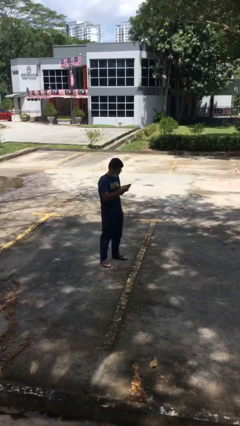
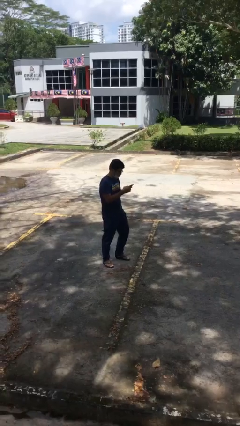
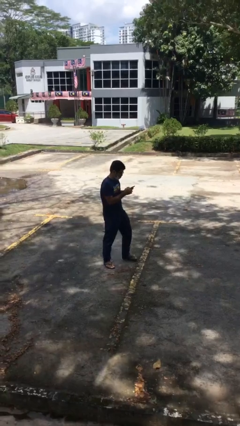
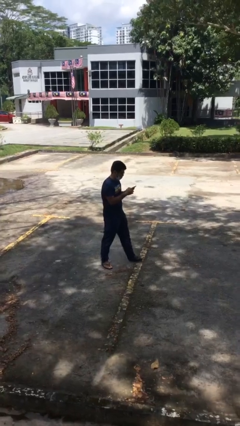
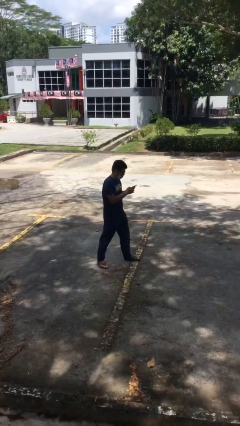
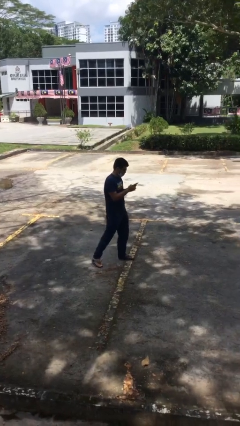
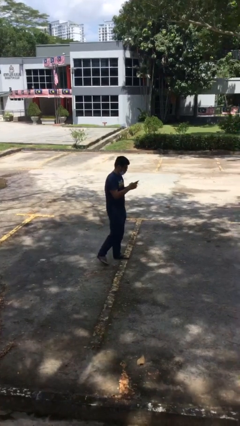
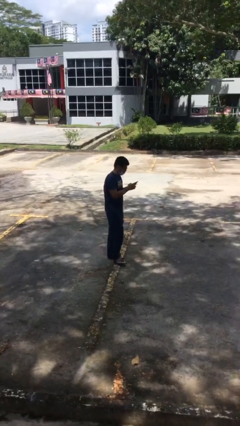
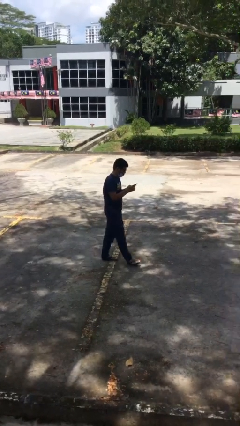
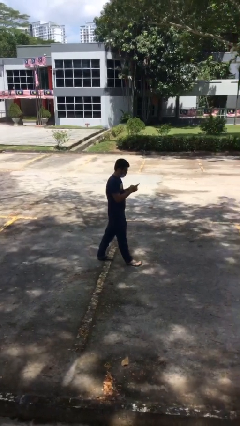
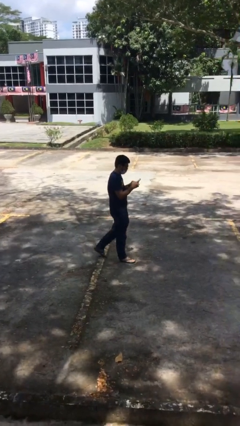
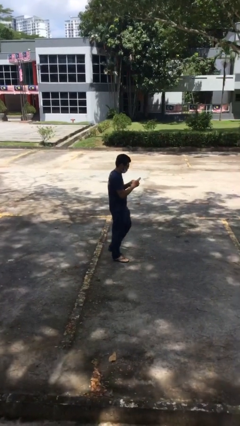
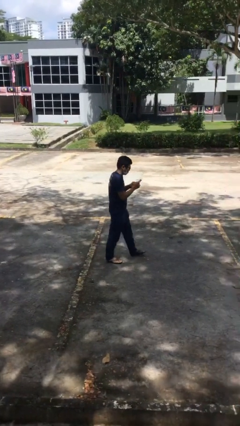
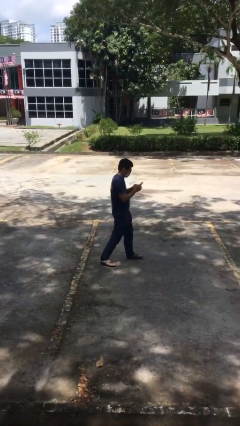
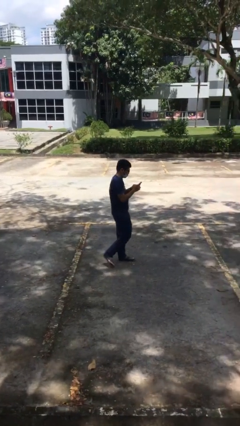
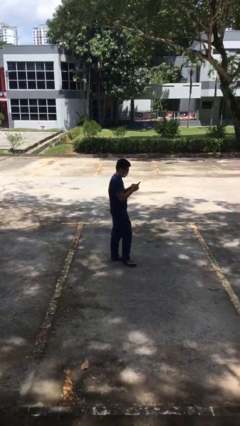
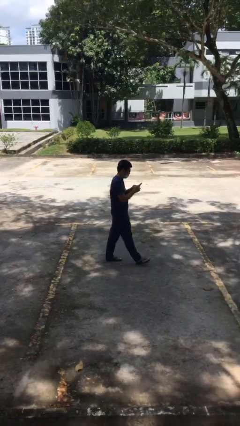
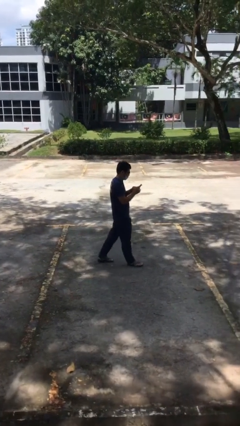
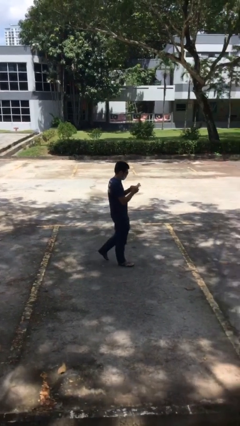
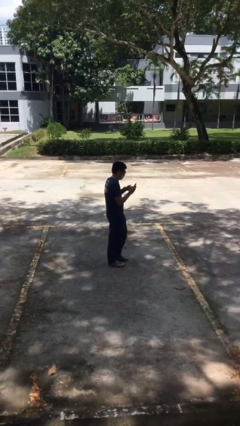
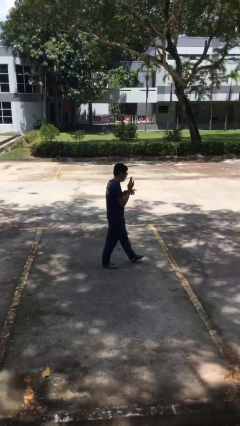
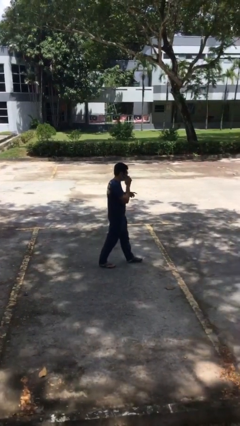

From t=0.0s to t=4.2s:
person texts on phone

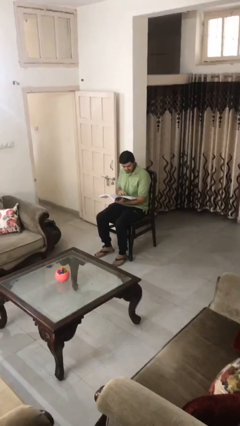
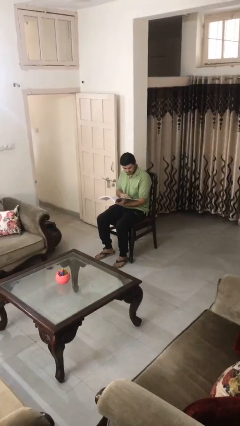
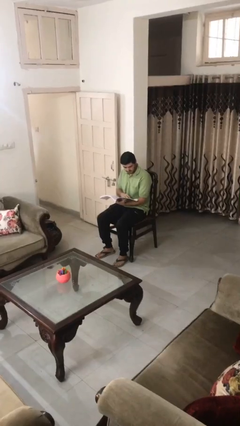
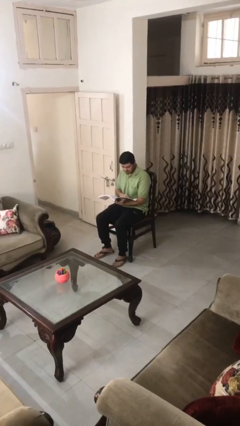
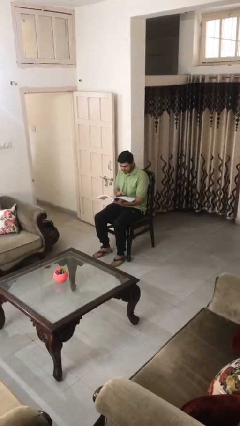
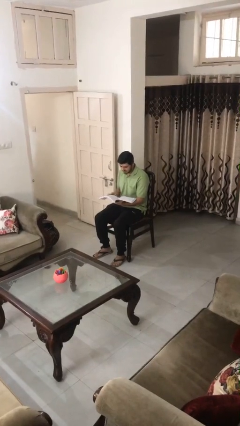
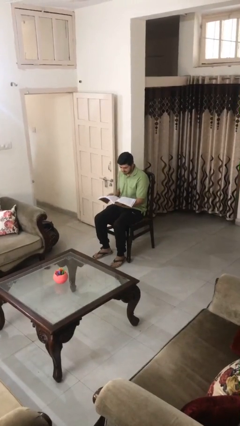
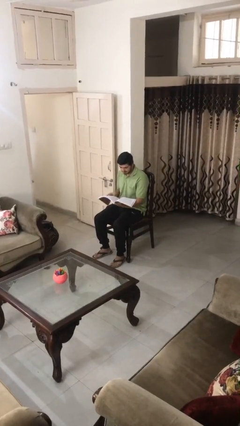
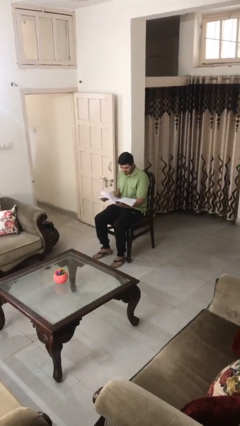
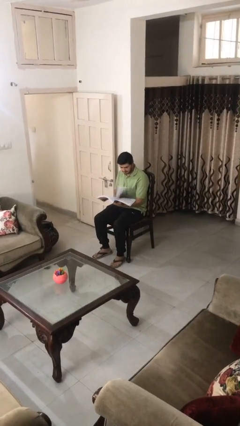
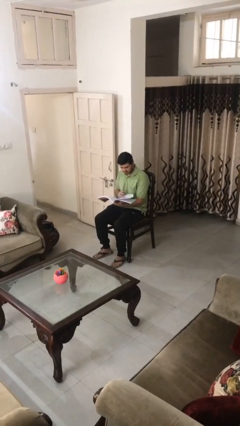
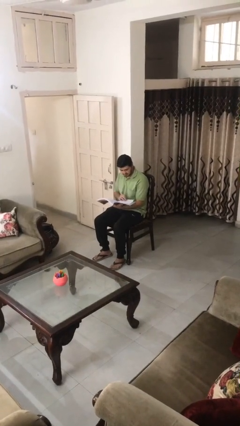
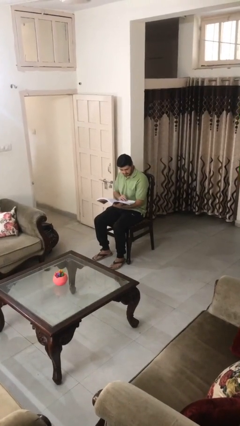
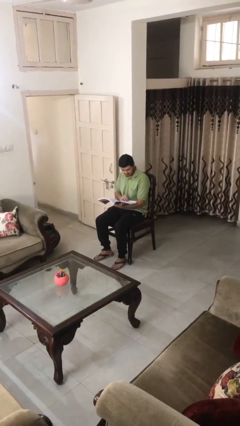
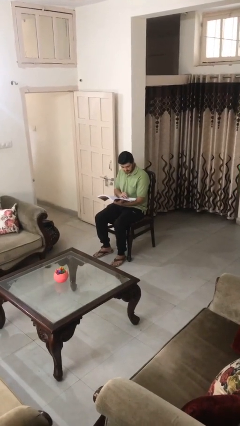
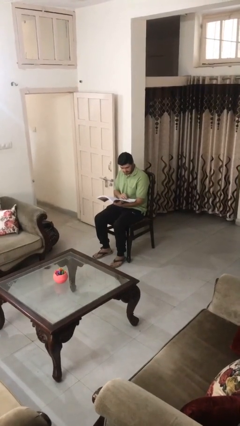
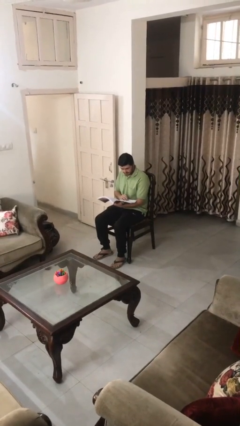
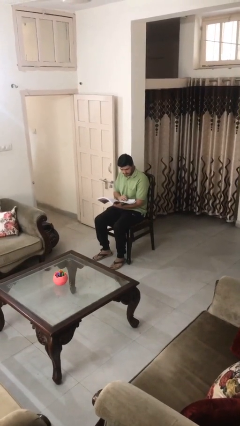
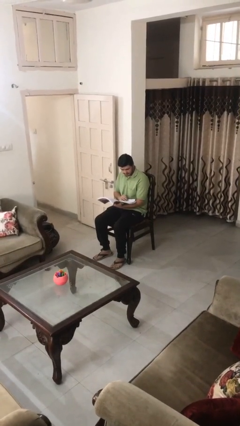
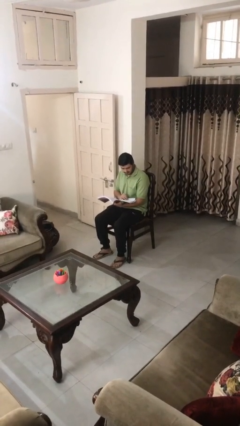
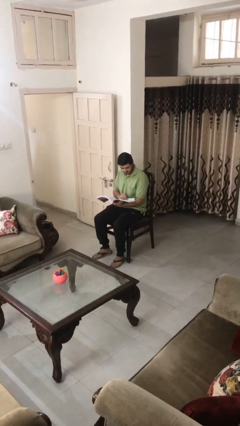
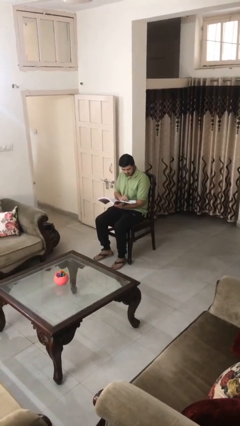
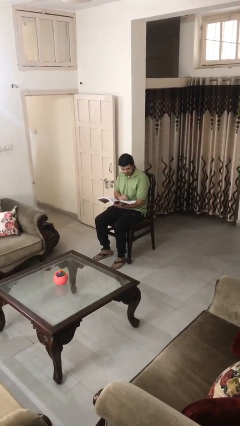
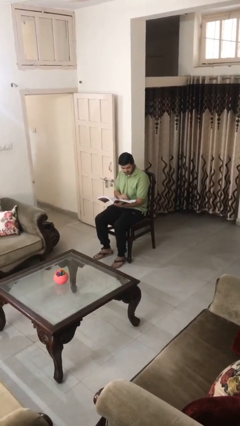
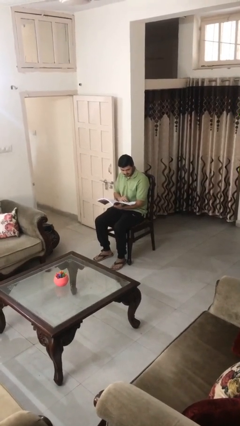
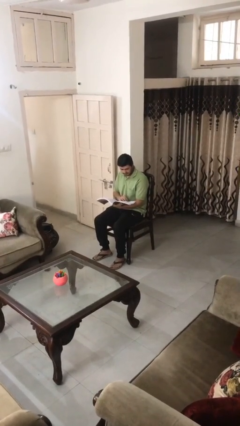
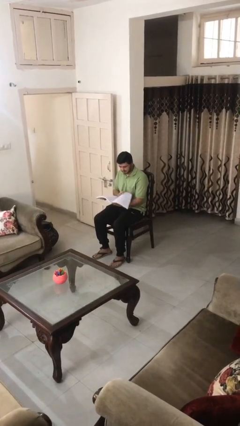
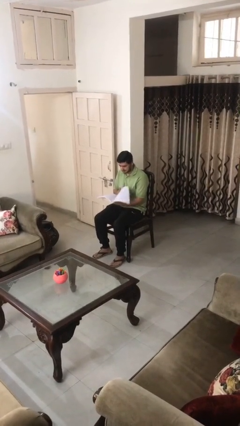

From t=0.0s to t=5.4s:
person reads document

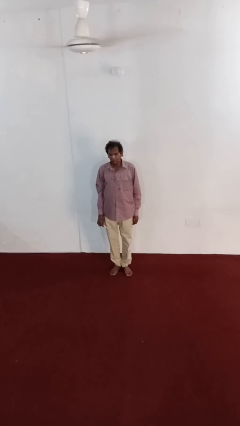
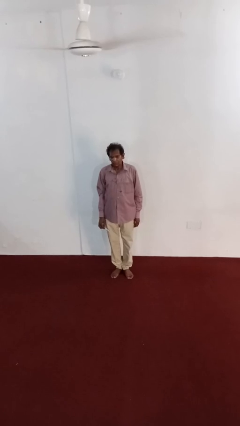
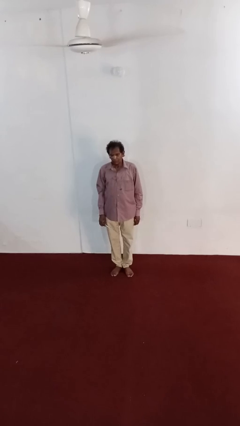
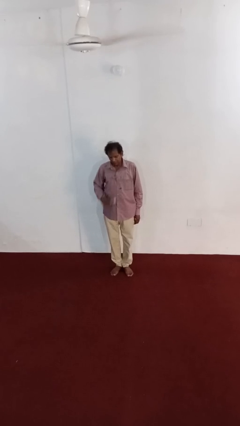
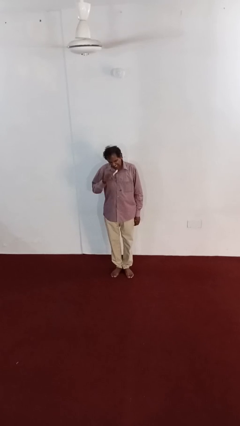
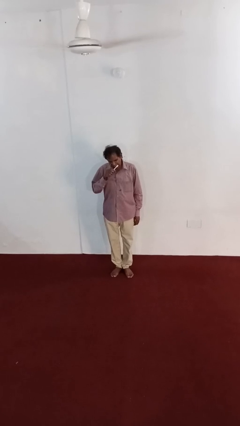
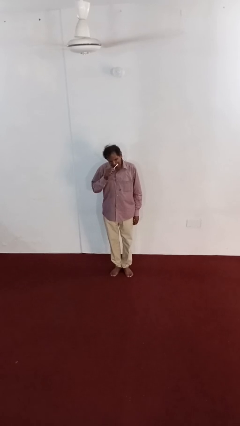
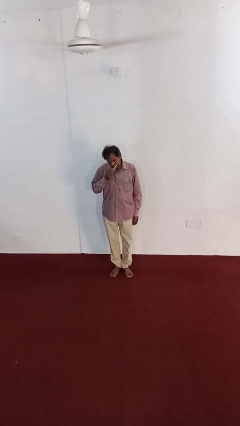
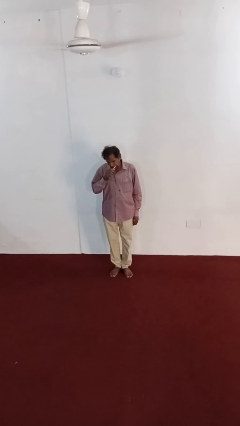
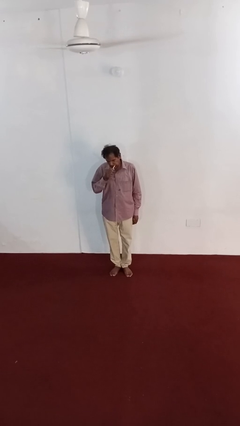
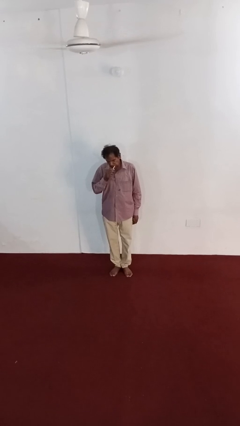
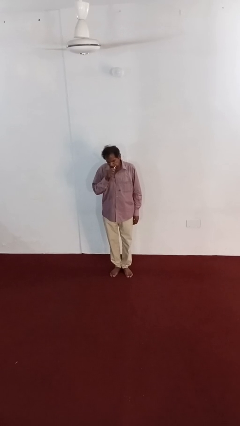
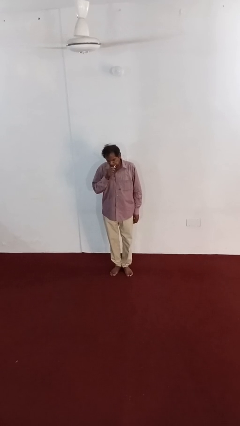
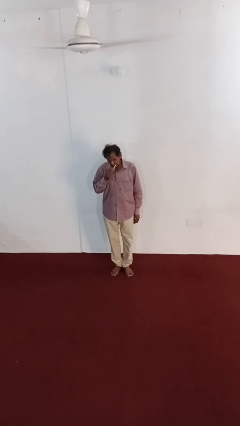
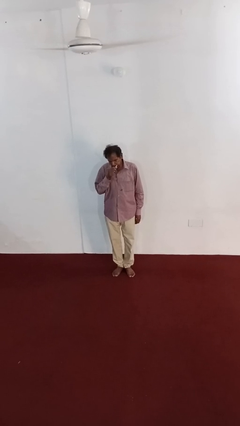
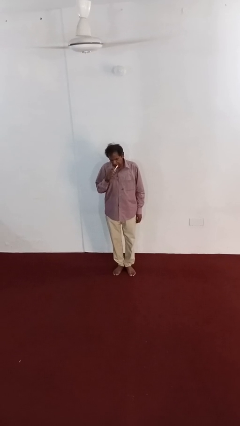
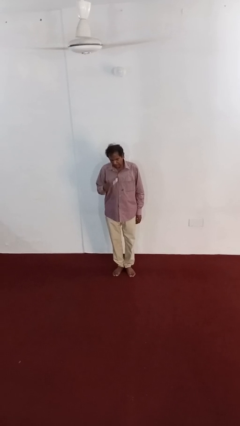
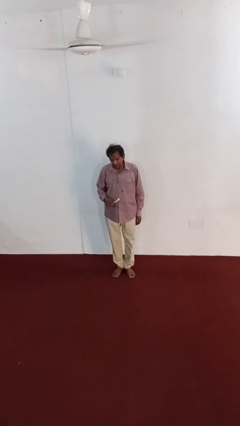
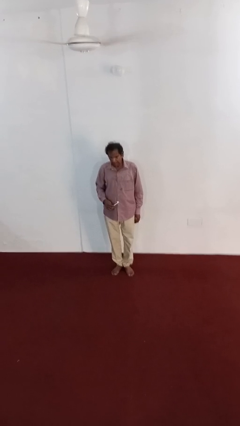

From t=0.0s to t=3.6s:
person brushes teeth

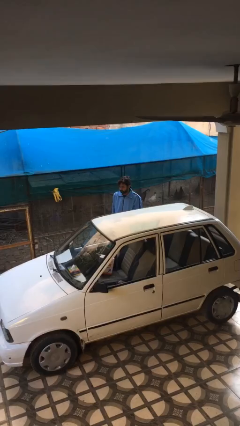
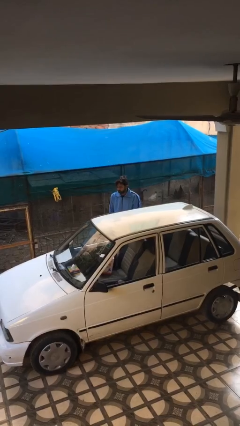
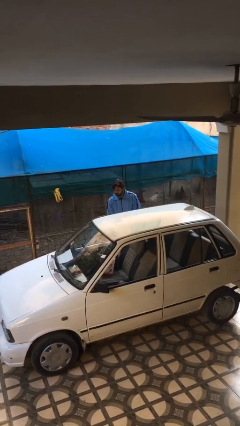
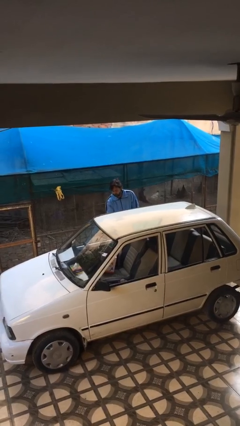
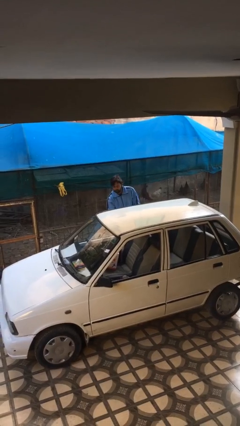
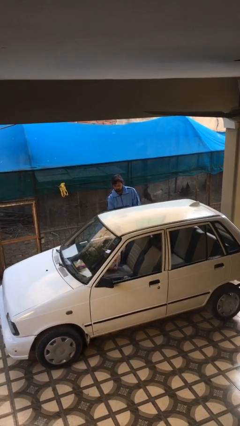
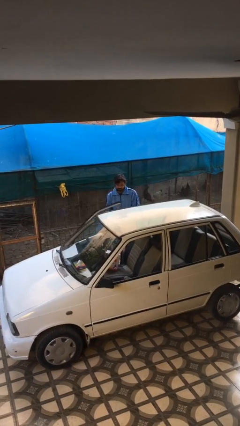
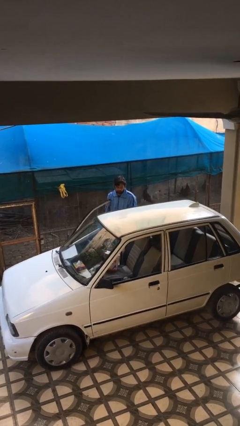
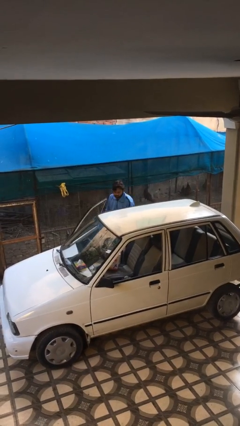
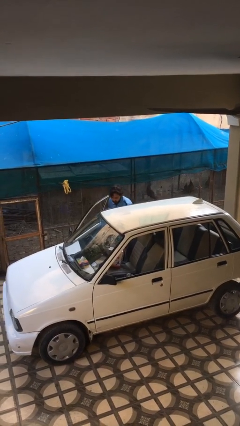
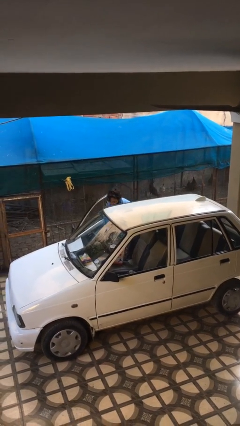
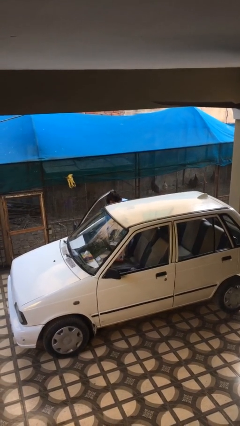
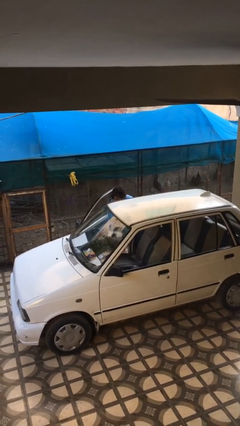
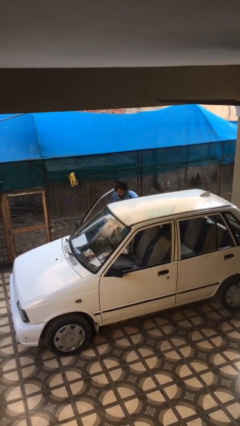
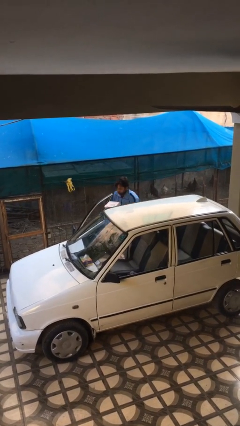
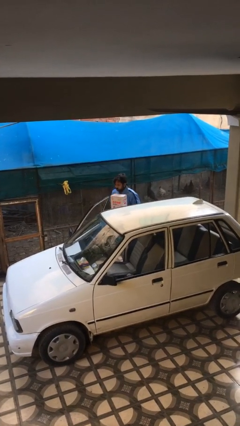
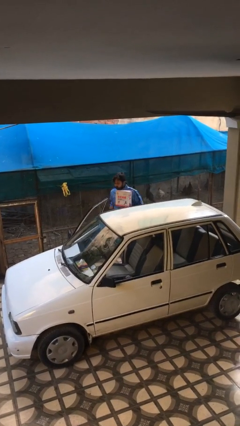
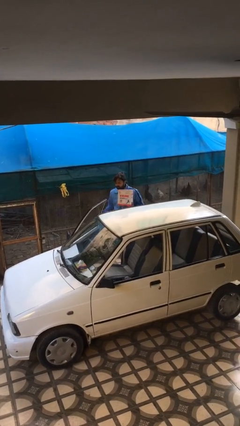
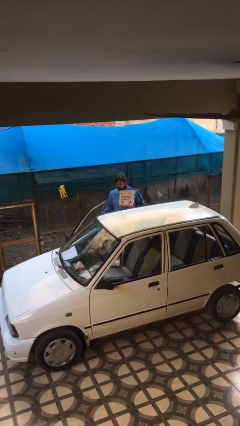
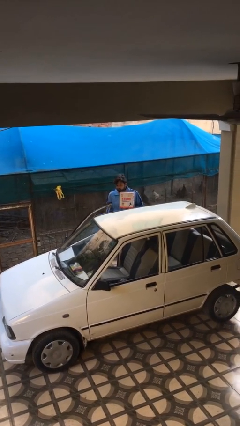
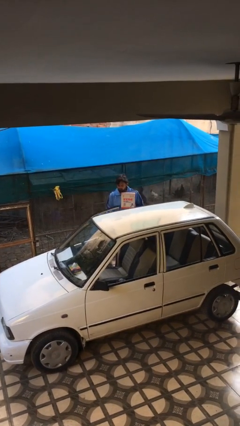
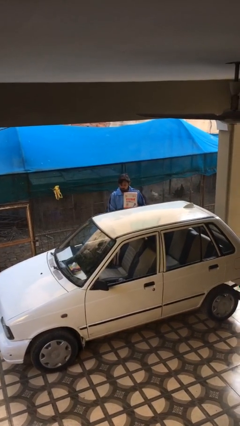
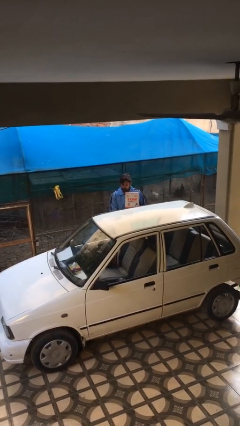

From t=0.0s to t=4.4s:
person unloads car

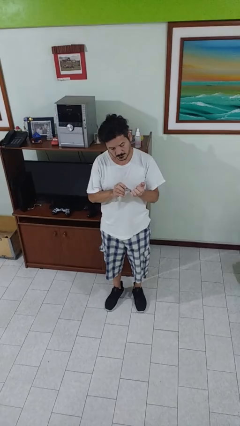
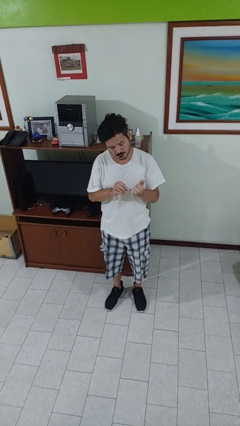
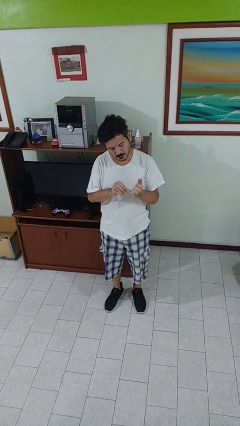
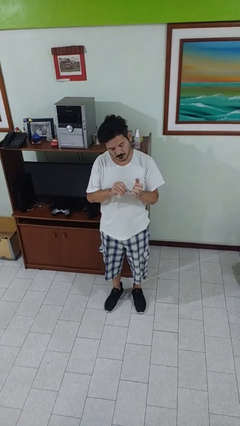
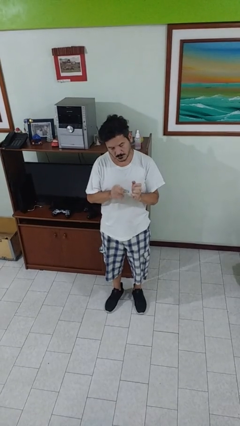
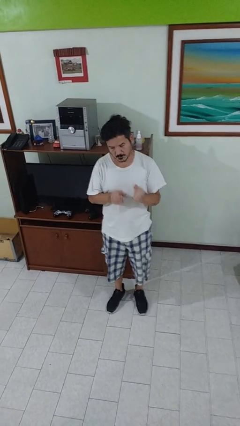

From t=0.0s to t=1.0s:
person clips fingernails
